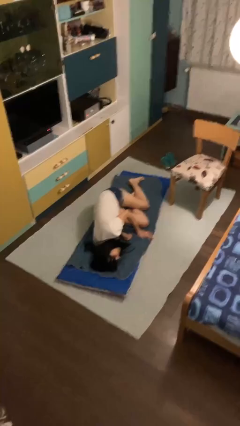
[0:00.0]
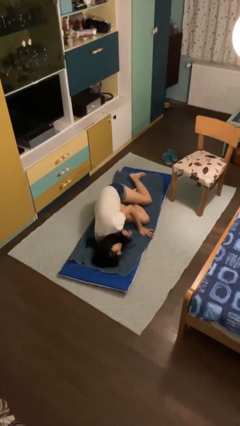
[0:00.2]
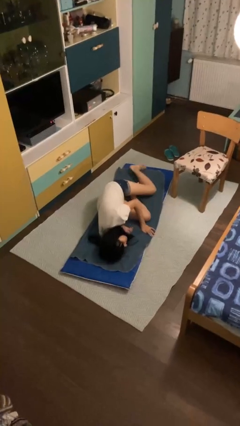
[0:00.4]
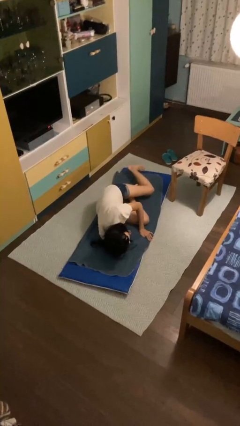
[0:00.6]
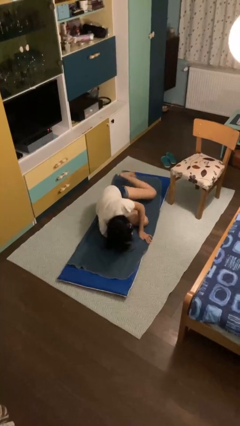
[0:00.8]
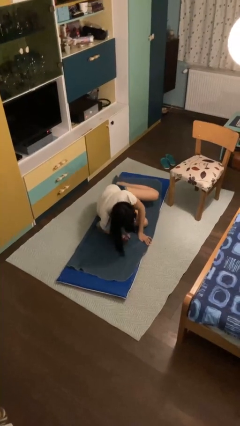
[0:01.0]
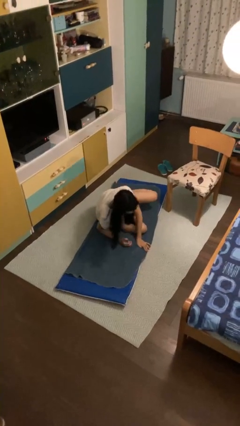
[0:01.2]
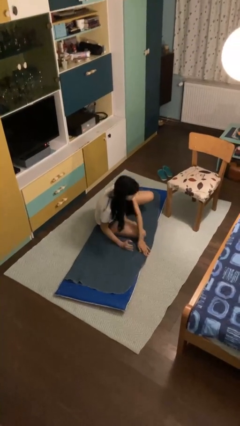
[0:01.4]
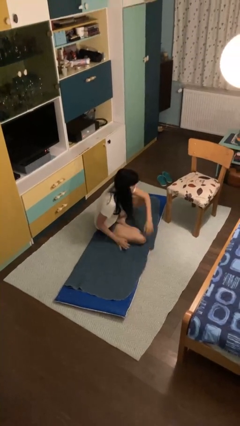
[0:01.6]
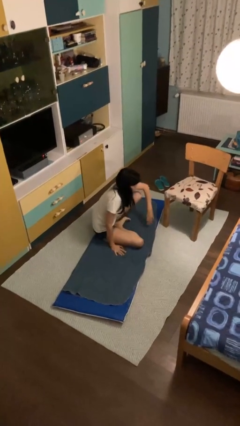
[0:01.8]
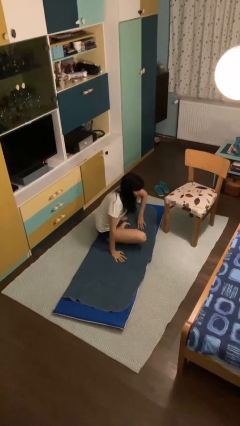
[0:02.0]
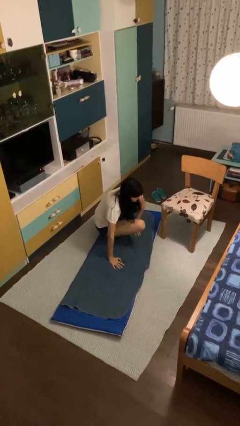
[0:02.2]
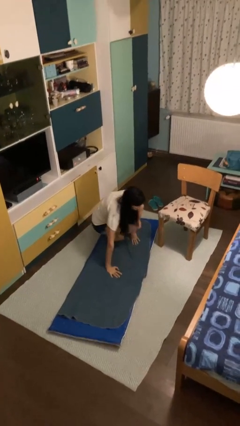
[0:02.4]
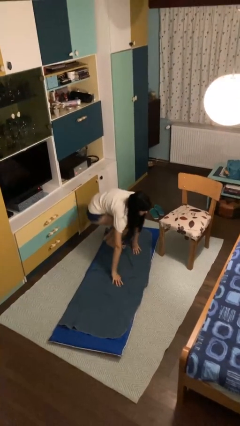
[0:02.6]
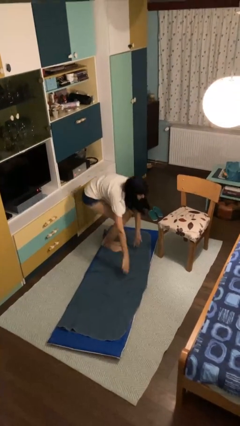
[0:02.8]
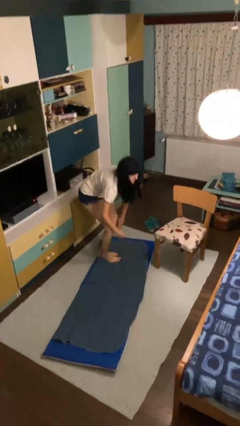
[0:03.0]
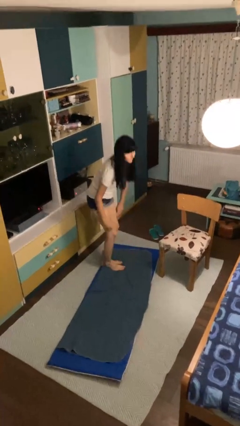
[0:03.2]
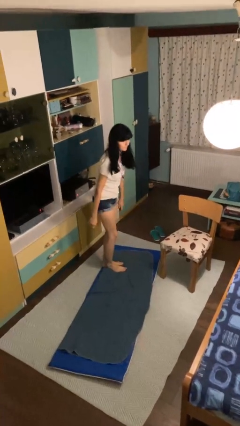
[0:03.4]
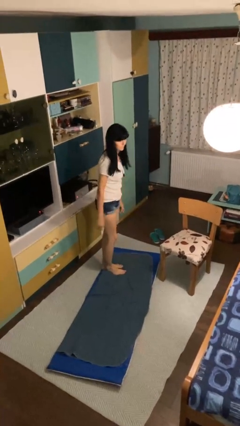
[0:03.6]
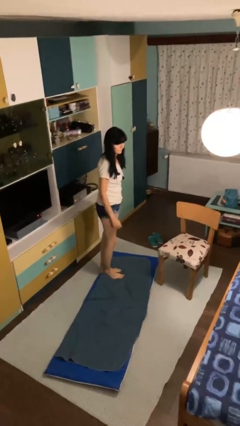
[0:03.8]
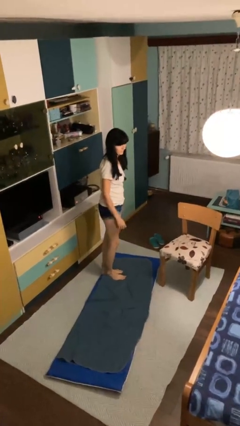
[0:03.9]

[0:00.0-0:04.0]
person stands up from floor

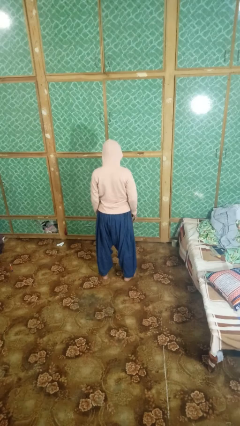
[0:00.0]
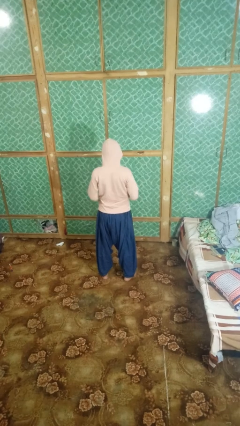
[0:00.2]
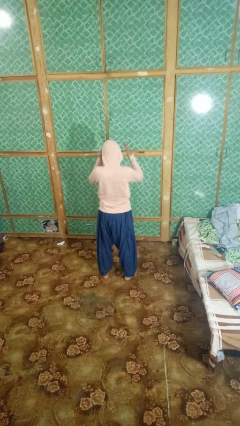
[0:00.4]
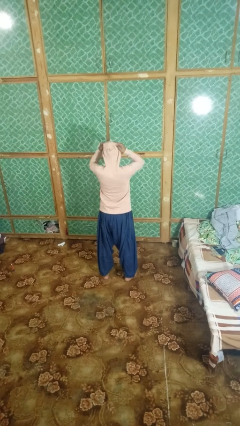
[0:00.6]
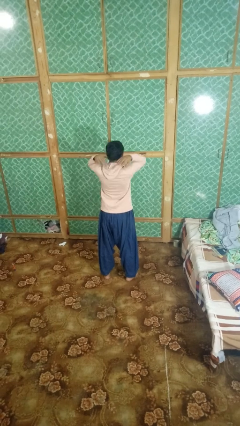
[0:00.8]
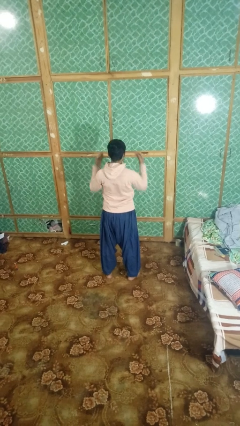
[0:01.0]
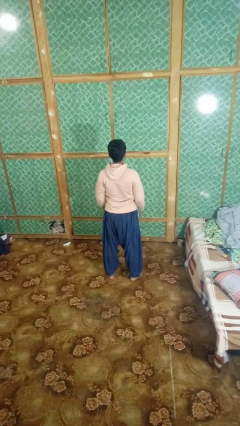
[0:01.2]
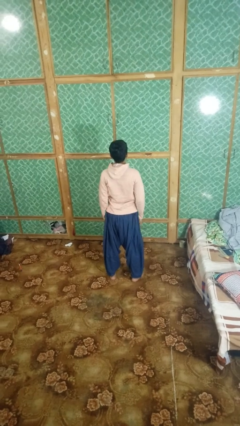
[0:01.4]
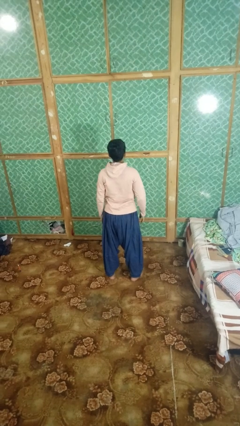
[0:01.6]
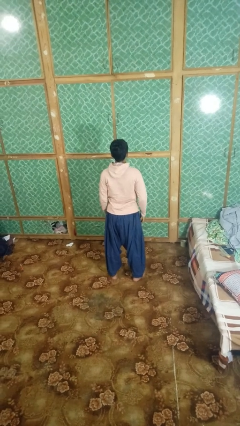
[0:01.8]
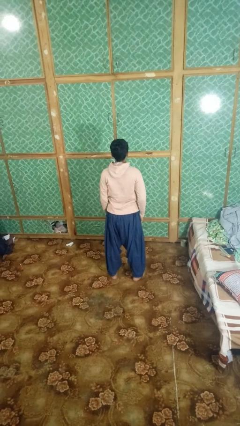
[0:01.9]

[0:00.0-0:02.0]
person takes off hoodie

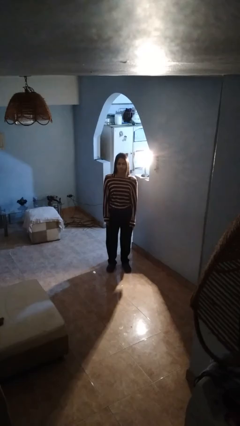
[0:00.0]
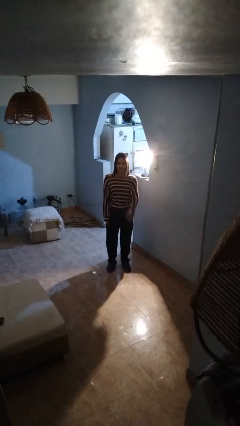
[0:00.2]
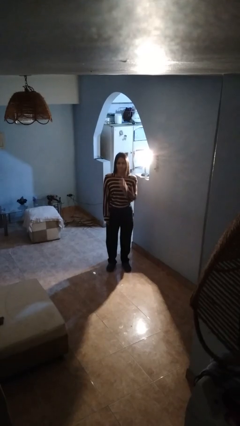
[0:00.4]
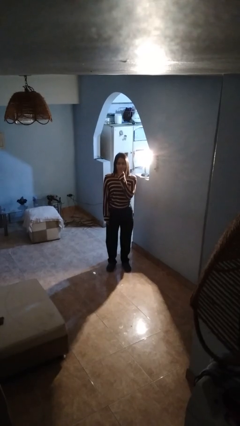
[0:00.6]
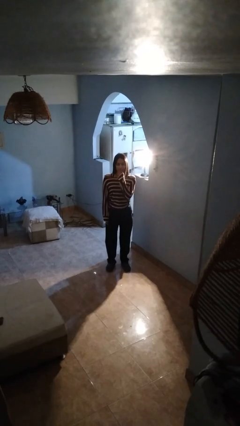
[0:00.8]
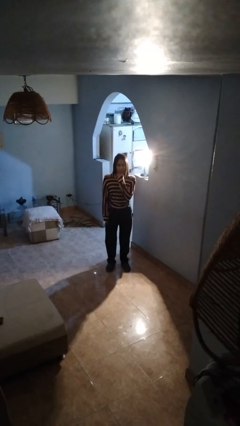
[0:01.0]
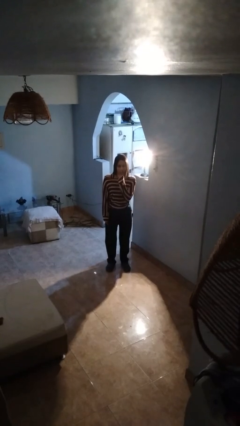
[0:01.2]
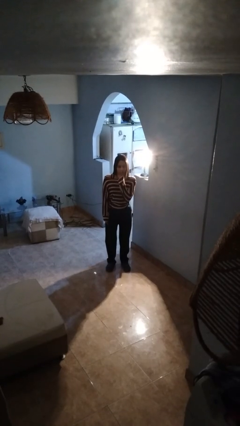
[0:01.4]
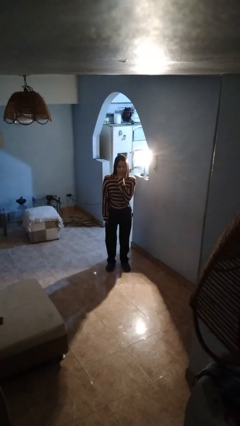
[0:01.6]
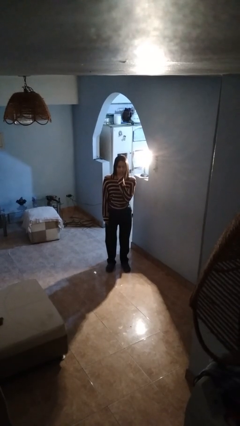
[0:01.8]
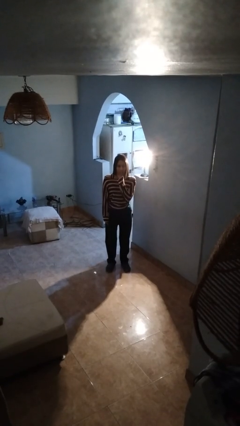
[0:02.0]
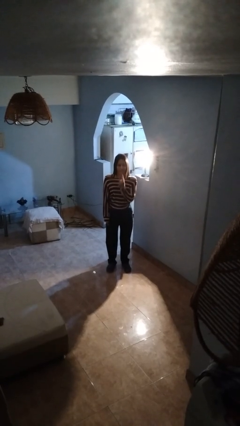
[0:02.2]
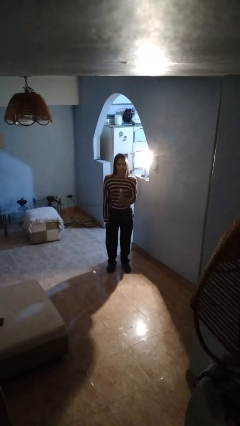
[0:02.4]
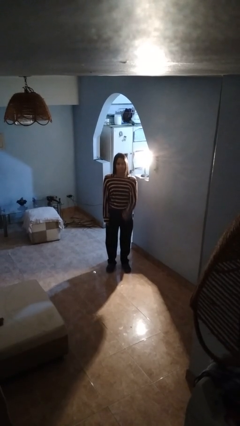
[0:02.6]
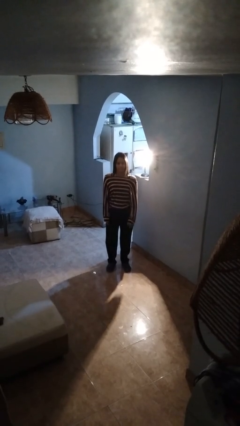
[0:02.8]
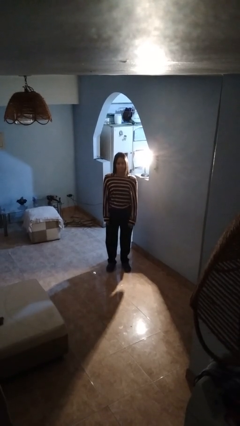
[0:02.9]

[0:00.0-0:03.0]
person gestures be quiet

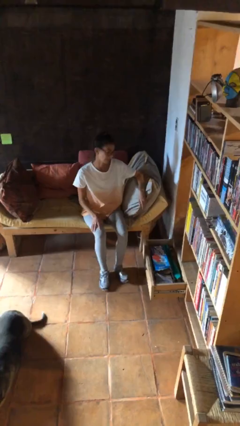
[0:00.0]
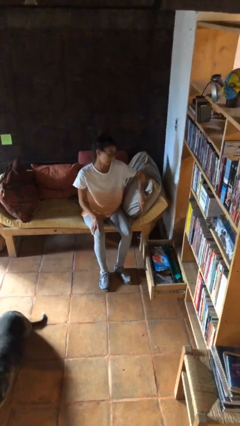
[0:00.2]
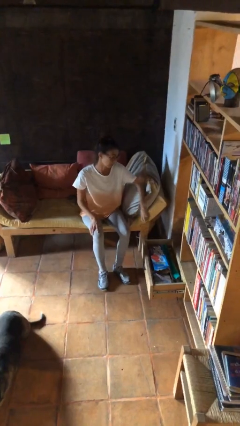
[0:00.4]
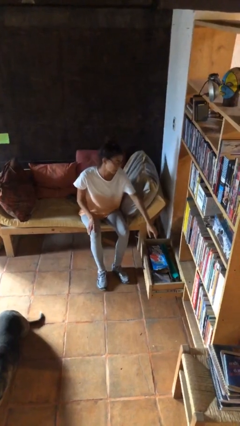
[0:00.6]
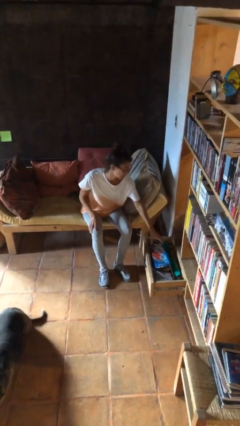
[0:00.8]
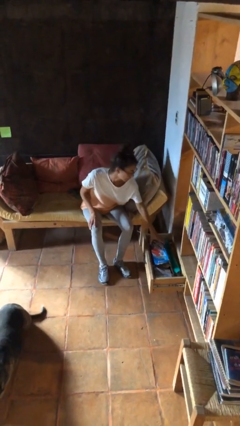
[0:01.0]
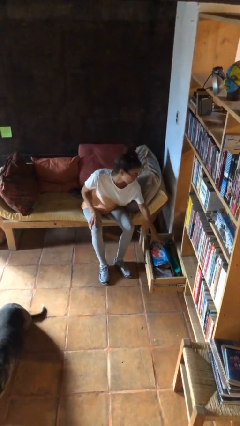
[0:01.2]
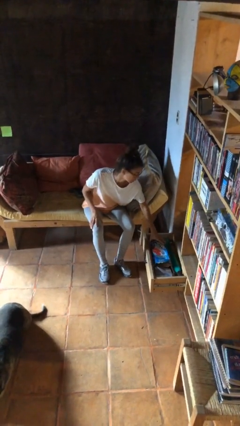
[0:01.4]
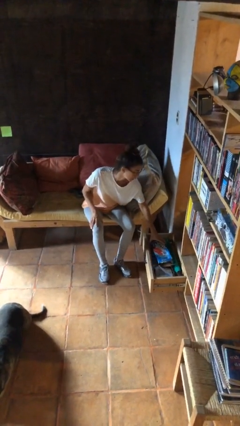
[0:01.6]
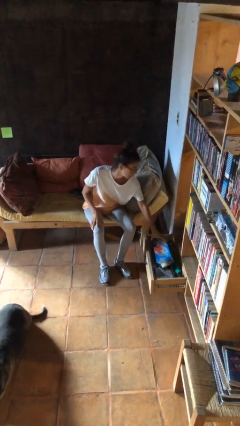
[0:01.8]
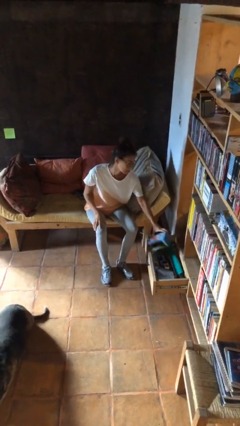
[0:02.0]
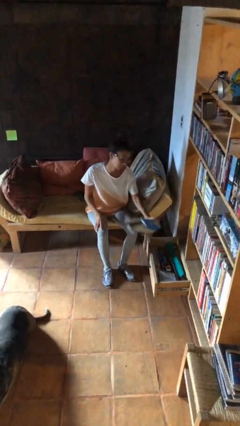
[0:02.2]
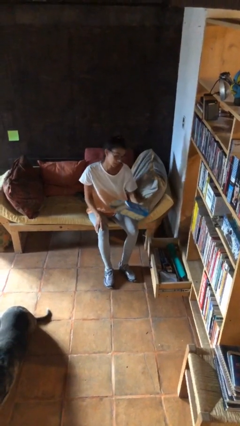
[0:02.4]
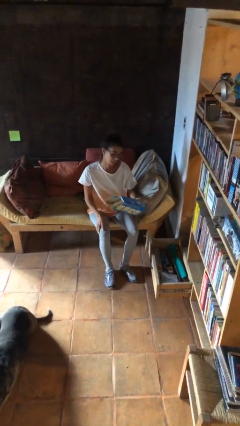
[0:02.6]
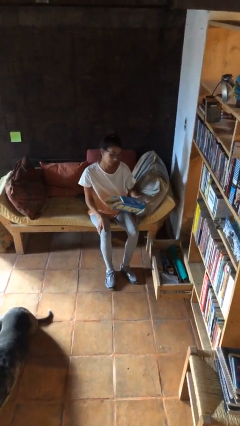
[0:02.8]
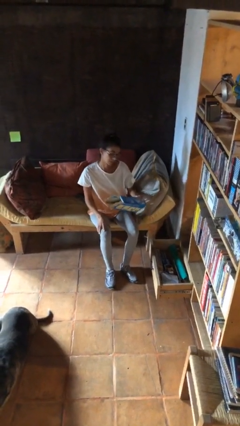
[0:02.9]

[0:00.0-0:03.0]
person picks up object from cabinet

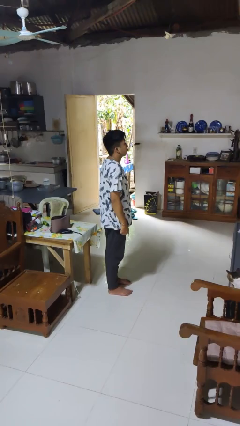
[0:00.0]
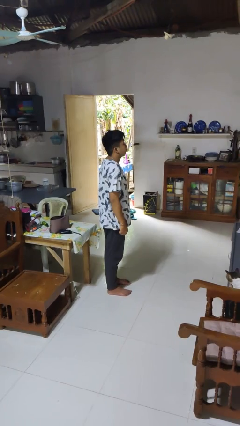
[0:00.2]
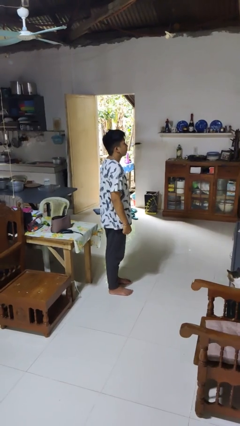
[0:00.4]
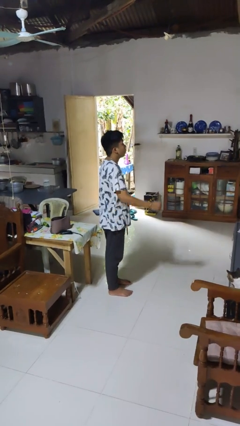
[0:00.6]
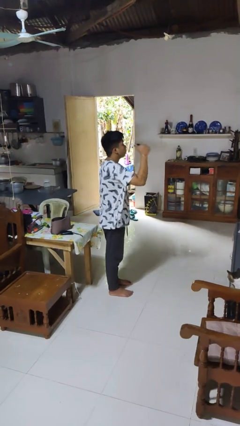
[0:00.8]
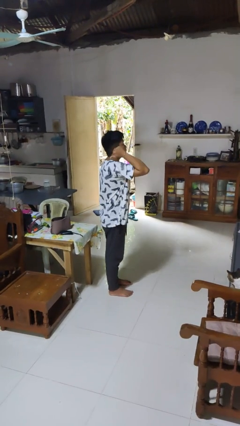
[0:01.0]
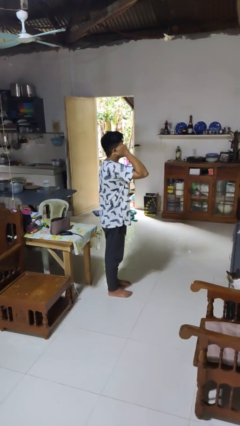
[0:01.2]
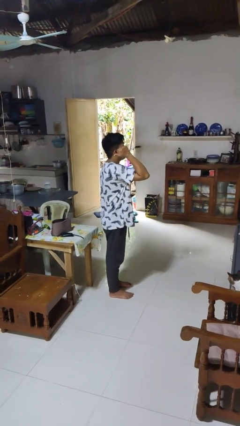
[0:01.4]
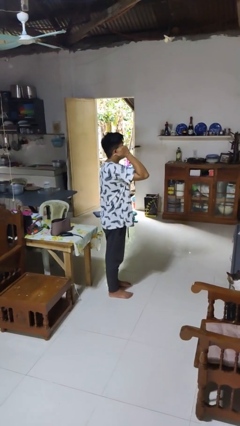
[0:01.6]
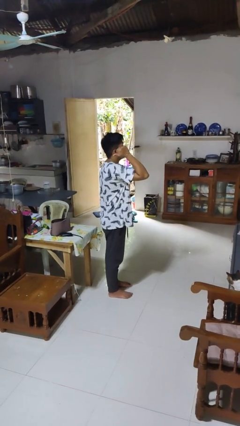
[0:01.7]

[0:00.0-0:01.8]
person gestures behind me

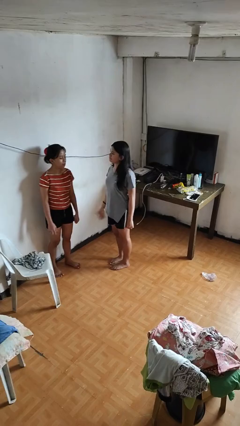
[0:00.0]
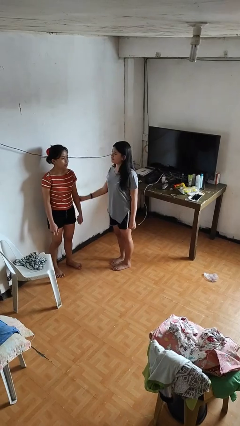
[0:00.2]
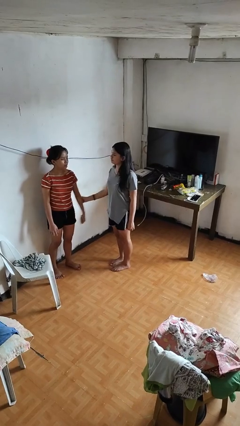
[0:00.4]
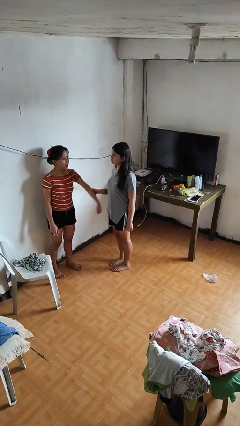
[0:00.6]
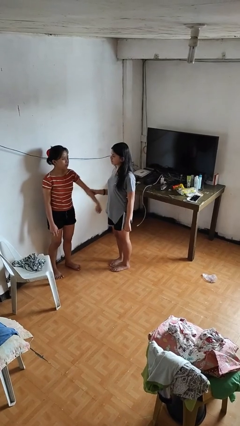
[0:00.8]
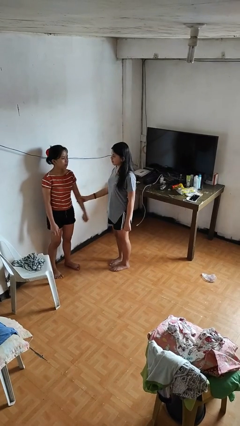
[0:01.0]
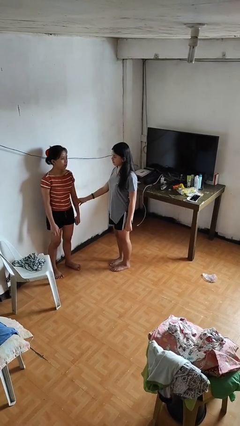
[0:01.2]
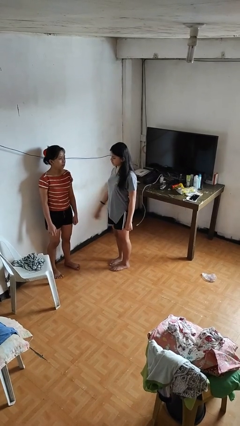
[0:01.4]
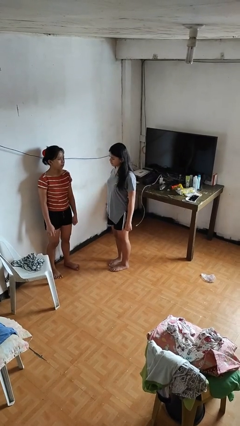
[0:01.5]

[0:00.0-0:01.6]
person grabs person by forearm

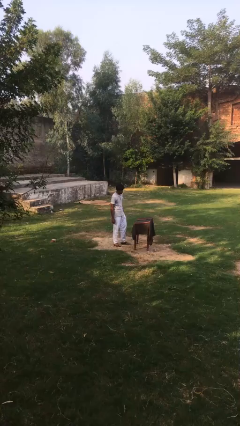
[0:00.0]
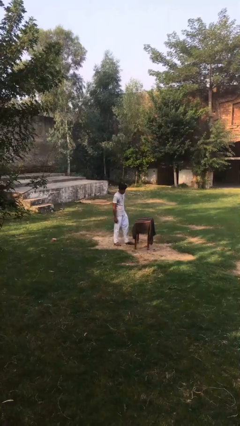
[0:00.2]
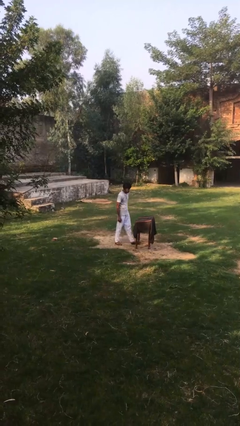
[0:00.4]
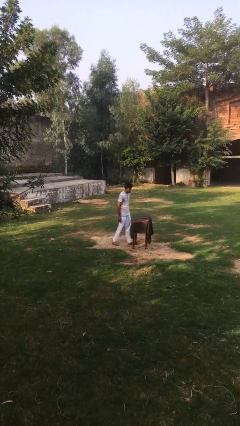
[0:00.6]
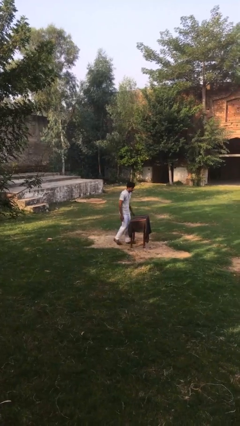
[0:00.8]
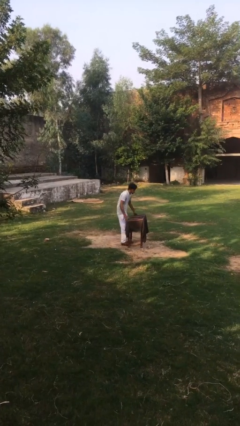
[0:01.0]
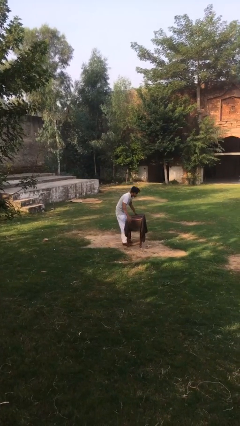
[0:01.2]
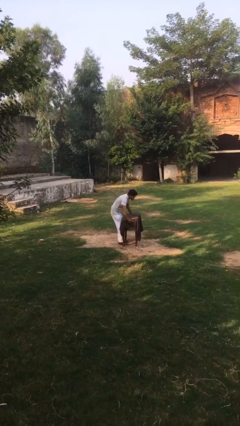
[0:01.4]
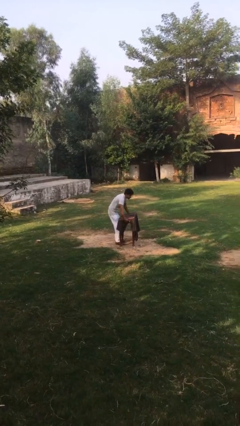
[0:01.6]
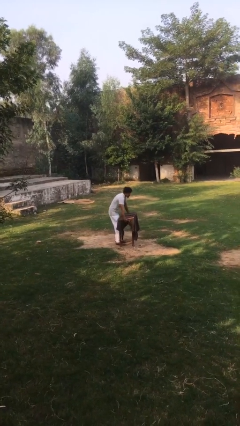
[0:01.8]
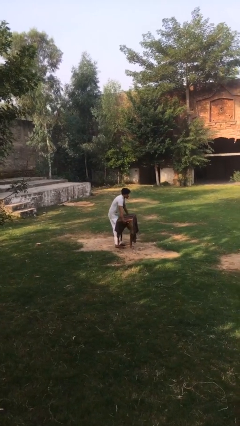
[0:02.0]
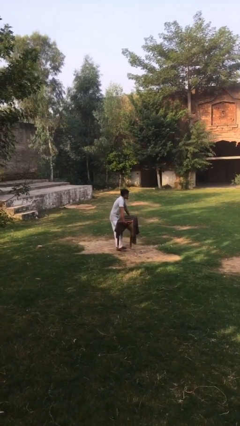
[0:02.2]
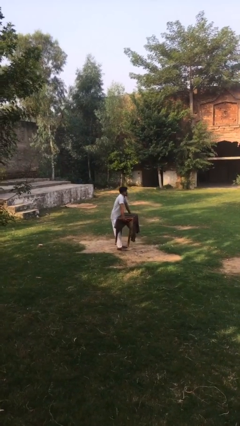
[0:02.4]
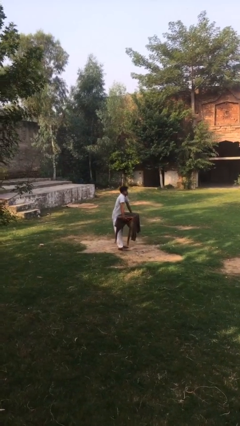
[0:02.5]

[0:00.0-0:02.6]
person picks up object from floor
